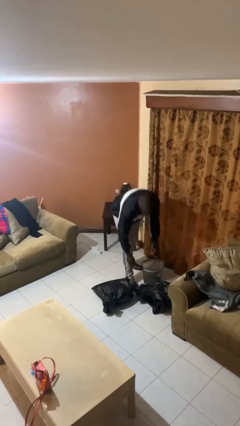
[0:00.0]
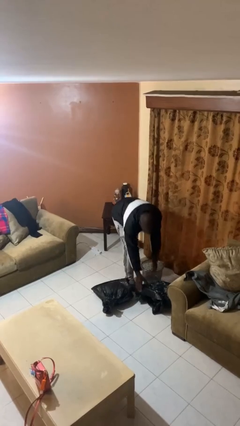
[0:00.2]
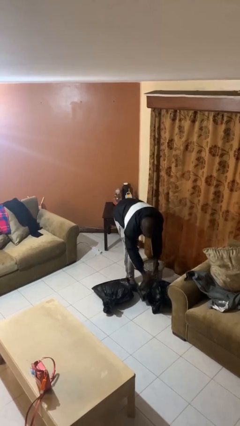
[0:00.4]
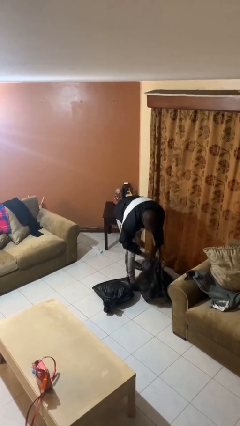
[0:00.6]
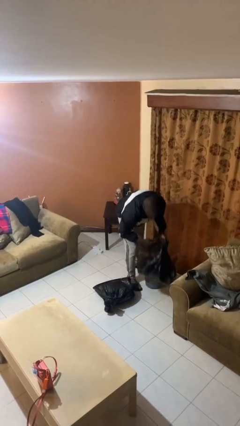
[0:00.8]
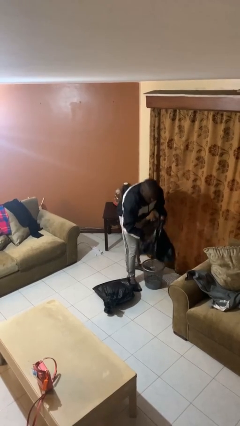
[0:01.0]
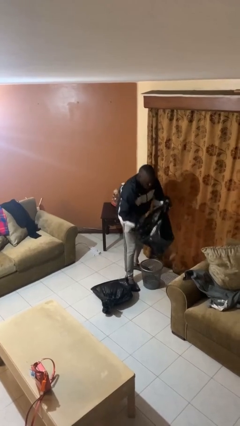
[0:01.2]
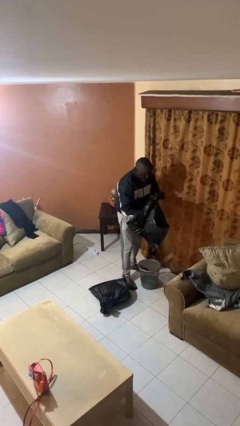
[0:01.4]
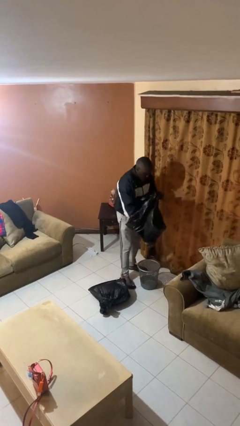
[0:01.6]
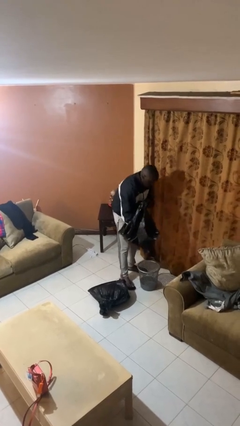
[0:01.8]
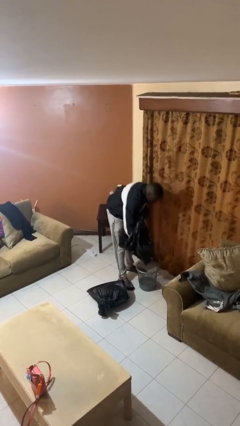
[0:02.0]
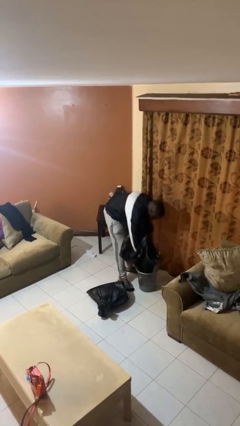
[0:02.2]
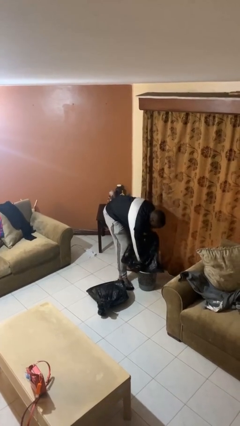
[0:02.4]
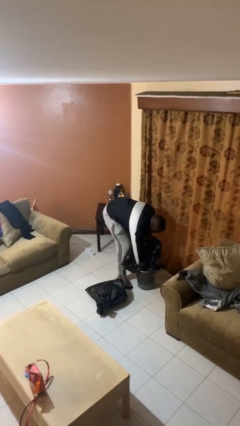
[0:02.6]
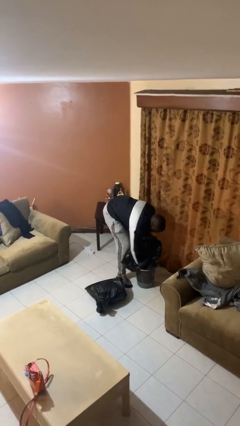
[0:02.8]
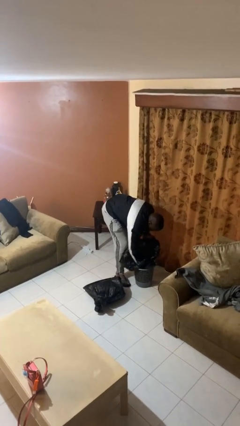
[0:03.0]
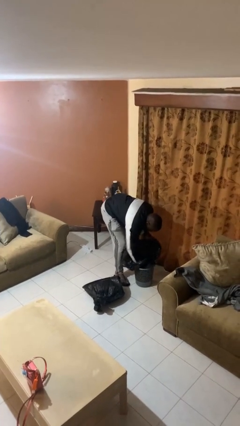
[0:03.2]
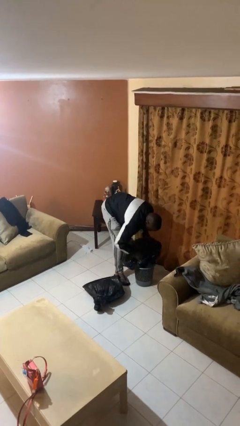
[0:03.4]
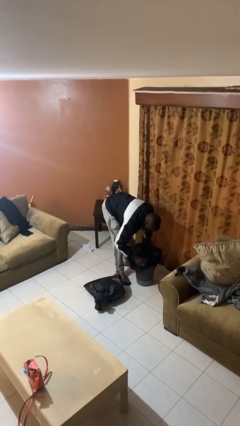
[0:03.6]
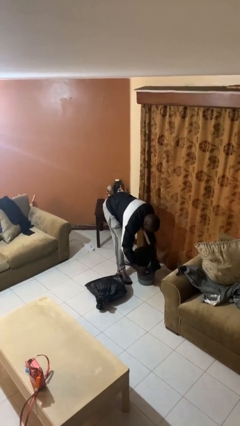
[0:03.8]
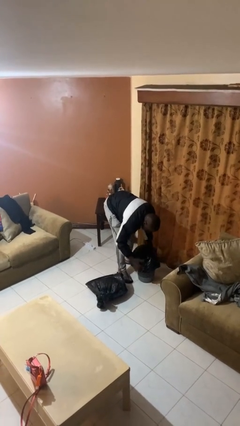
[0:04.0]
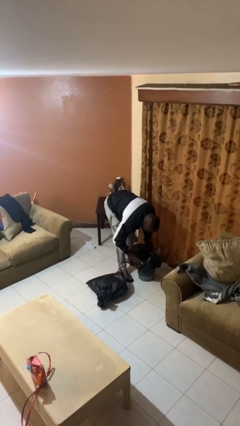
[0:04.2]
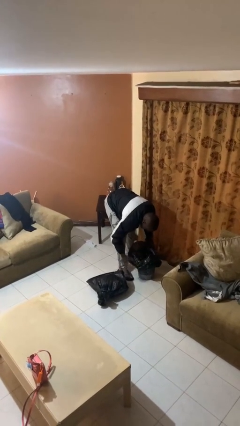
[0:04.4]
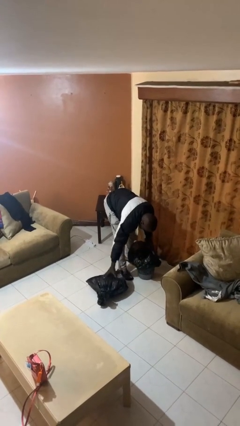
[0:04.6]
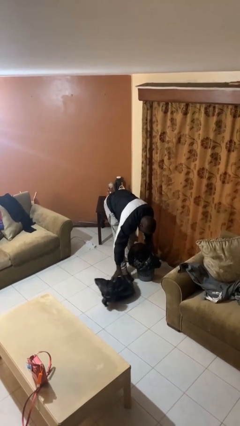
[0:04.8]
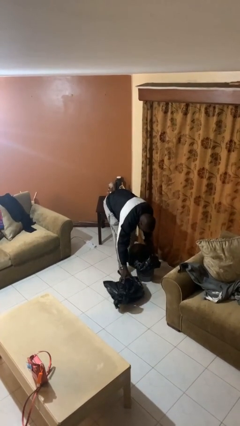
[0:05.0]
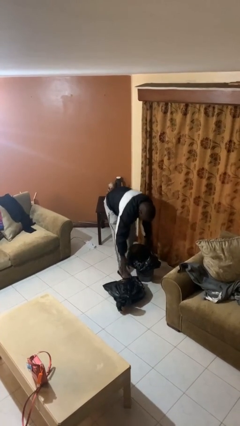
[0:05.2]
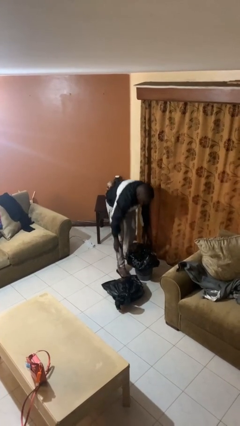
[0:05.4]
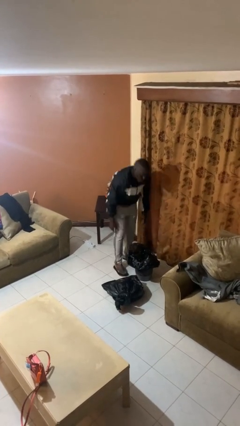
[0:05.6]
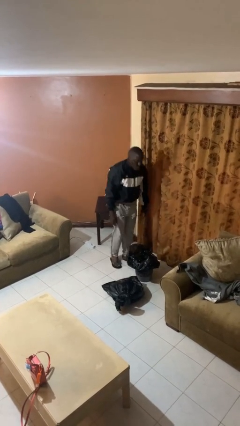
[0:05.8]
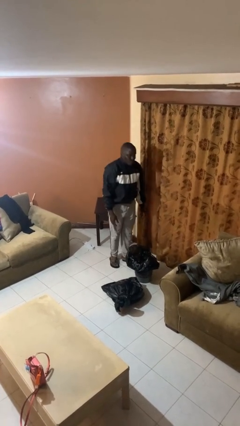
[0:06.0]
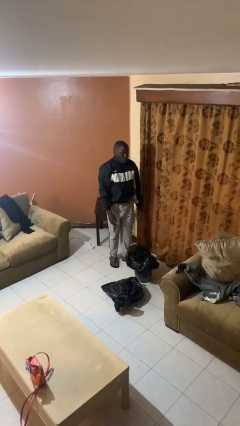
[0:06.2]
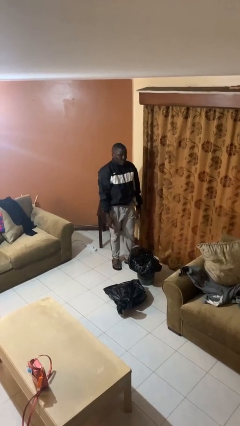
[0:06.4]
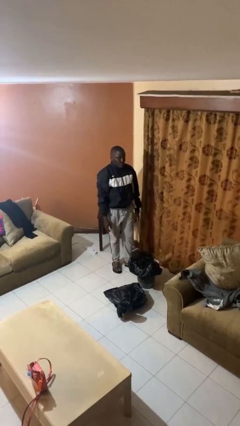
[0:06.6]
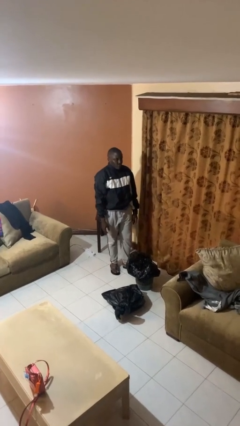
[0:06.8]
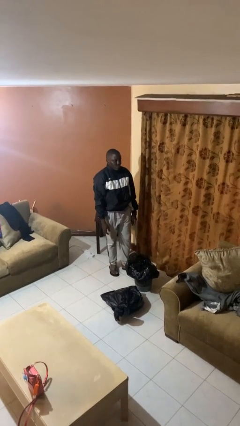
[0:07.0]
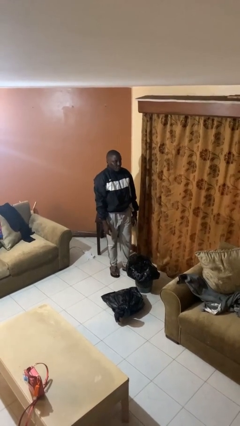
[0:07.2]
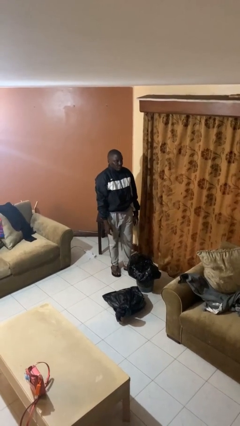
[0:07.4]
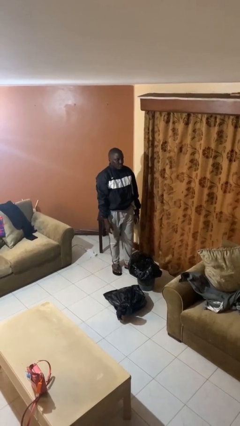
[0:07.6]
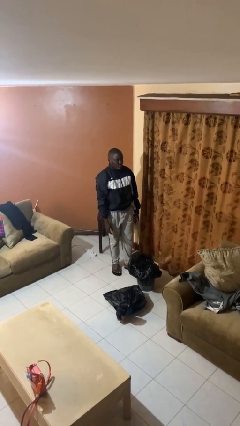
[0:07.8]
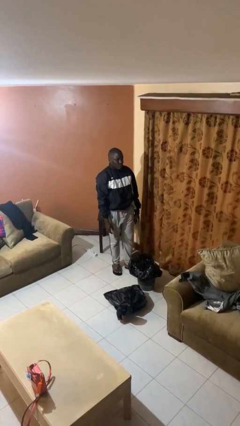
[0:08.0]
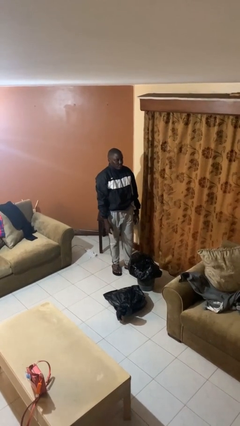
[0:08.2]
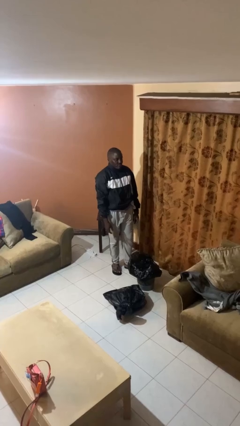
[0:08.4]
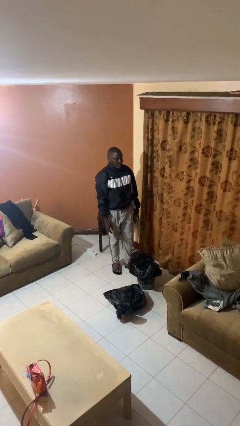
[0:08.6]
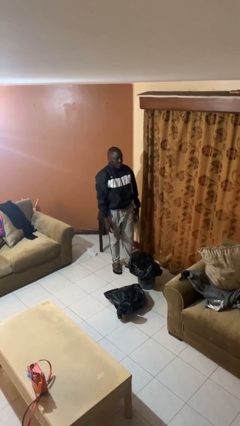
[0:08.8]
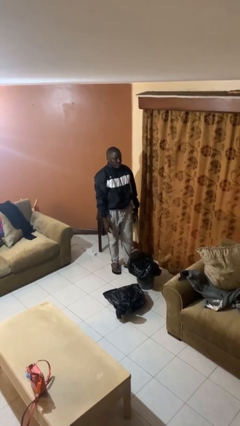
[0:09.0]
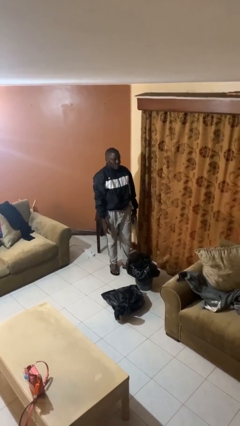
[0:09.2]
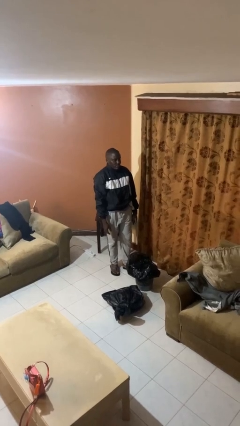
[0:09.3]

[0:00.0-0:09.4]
person inserts trashbag into trashcan

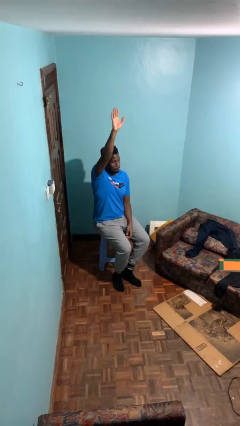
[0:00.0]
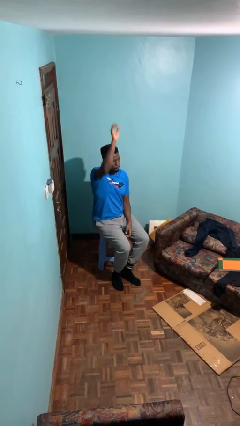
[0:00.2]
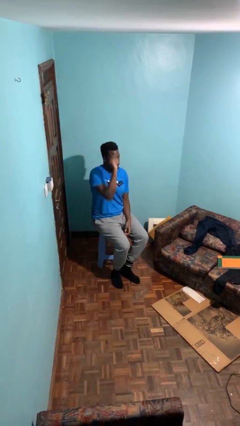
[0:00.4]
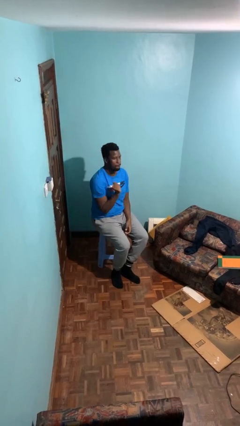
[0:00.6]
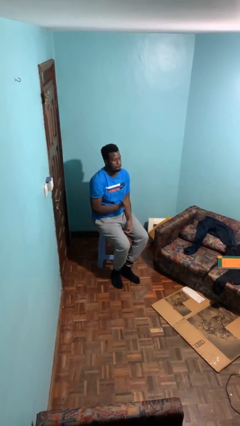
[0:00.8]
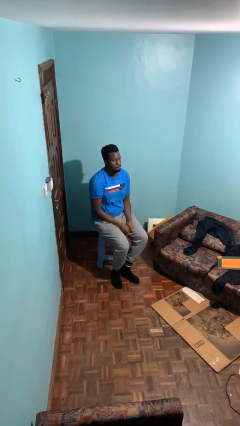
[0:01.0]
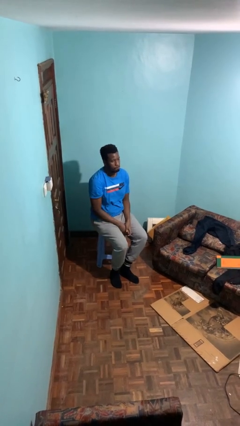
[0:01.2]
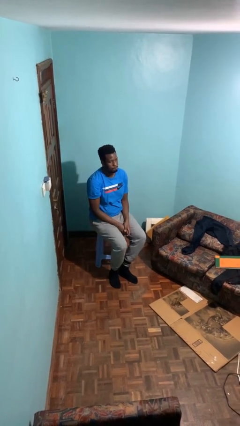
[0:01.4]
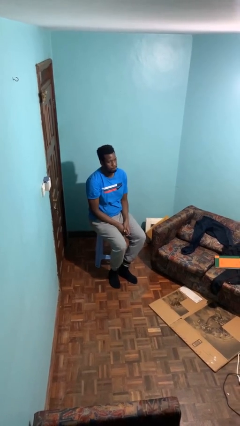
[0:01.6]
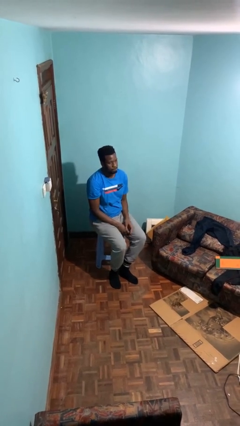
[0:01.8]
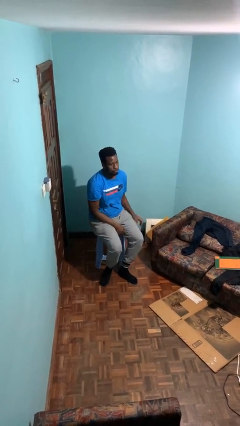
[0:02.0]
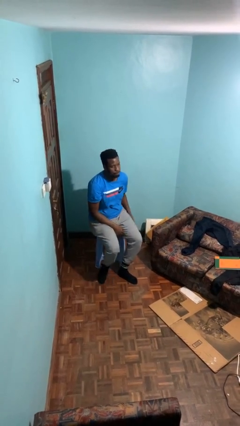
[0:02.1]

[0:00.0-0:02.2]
person gestures lower hand

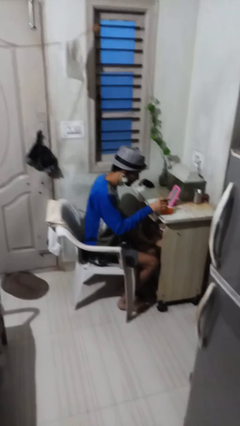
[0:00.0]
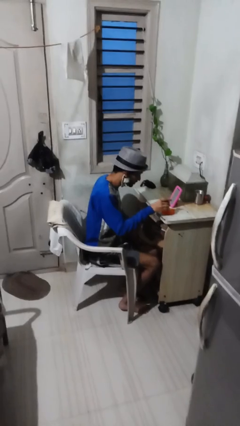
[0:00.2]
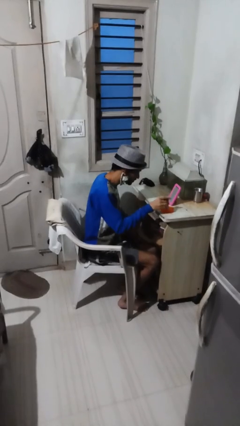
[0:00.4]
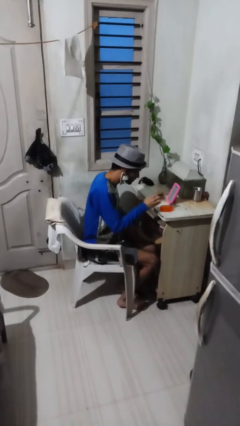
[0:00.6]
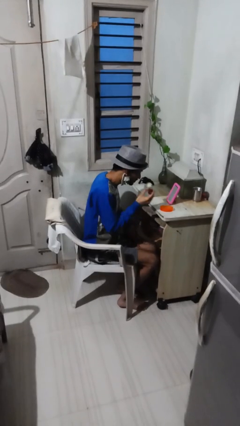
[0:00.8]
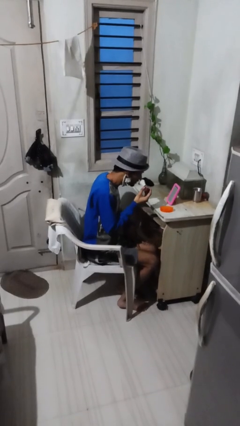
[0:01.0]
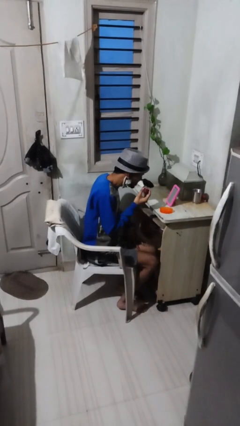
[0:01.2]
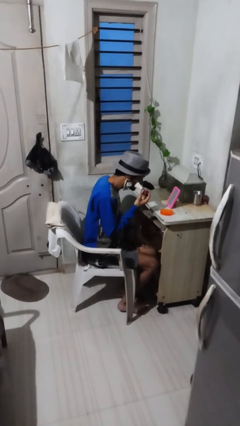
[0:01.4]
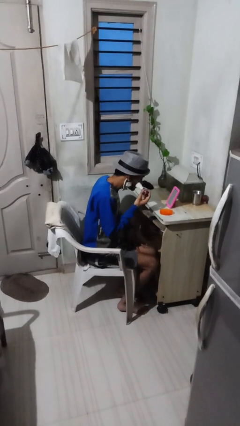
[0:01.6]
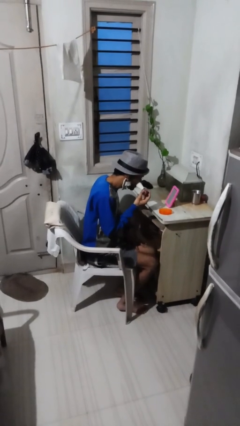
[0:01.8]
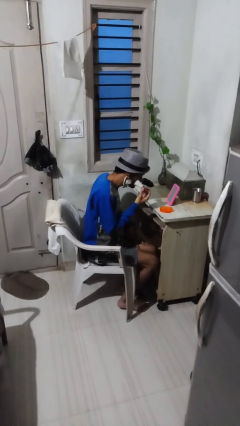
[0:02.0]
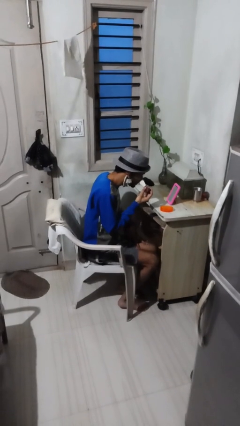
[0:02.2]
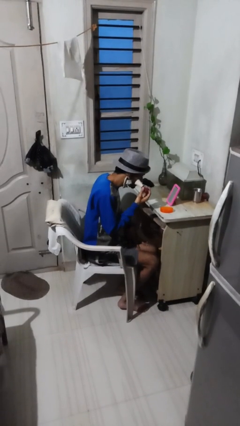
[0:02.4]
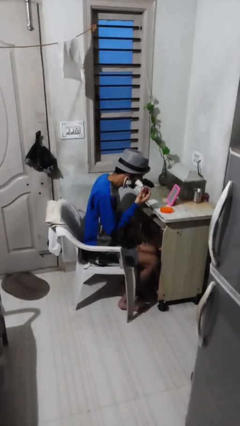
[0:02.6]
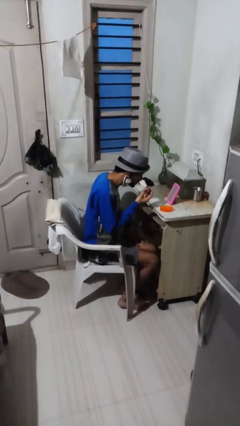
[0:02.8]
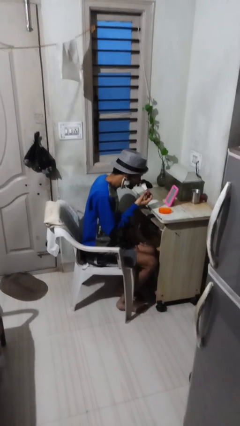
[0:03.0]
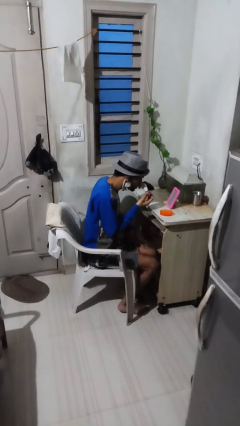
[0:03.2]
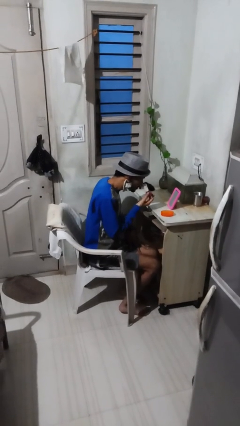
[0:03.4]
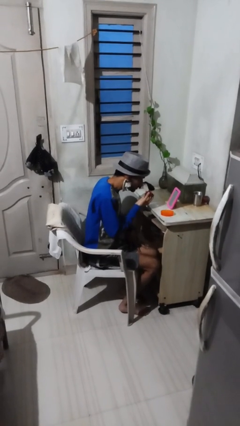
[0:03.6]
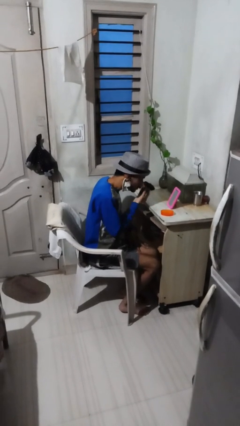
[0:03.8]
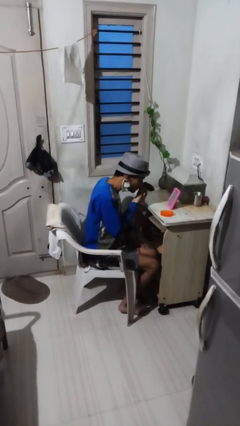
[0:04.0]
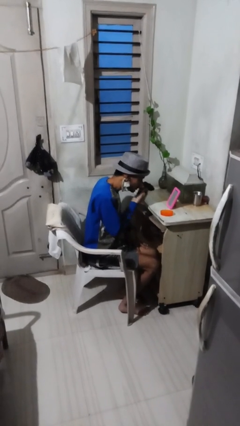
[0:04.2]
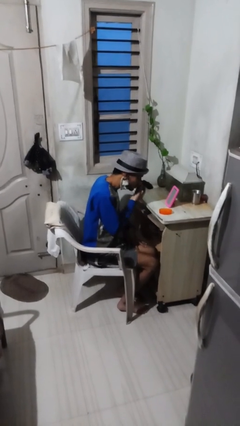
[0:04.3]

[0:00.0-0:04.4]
person applies foundation makeup

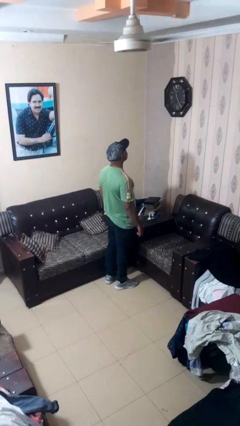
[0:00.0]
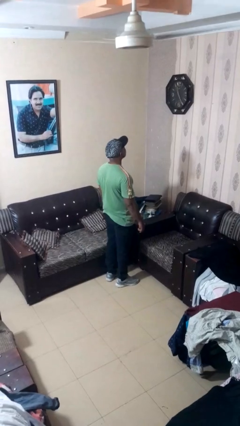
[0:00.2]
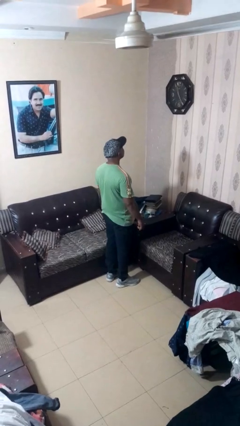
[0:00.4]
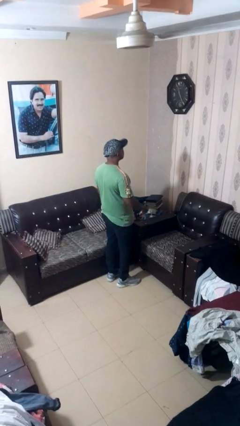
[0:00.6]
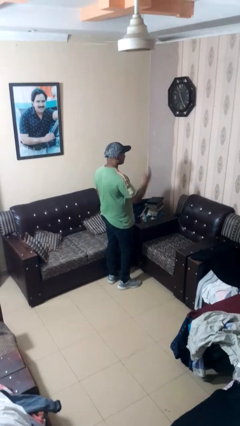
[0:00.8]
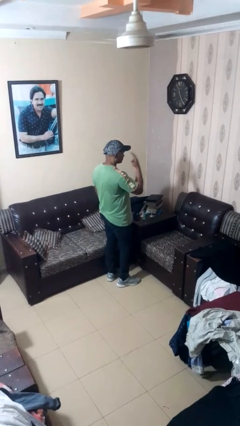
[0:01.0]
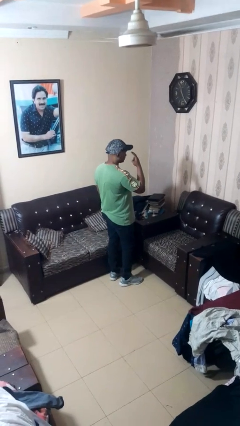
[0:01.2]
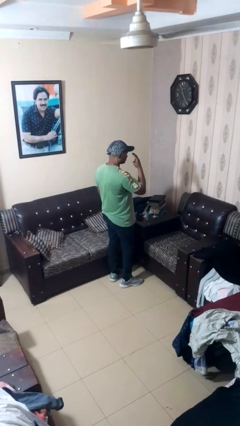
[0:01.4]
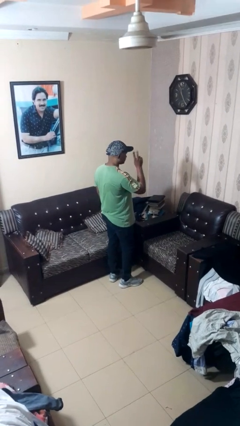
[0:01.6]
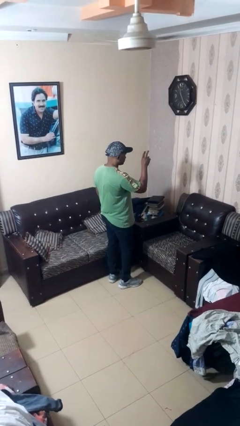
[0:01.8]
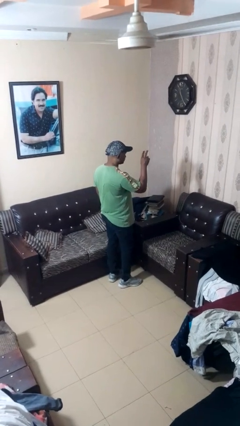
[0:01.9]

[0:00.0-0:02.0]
person gestures watch closely
